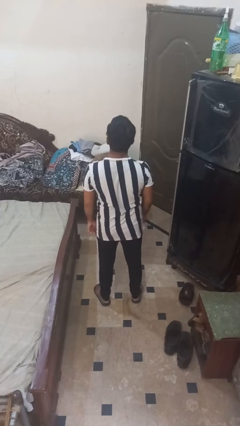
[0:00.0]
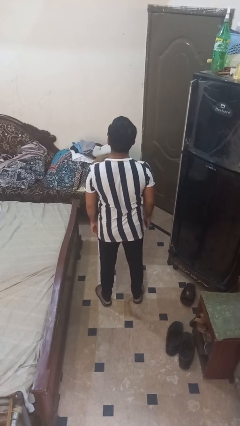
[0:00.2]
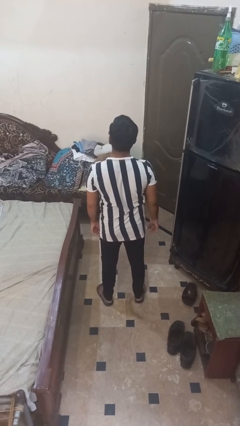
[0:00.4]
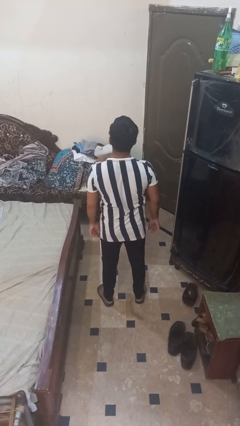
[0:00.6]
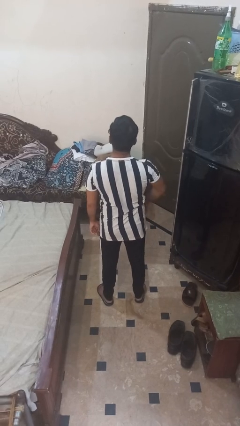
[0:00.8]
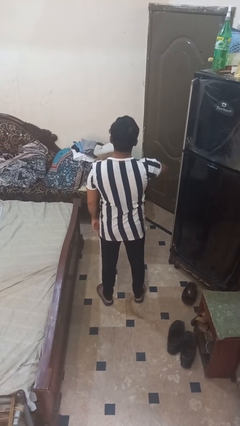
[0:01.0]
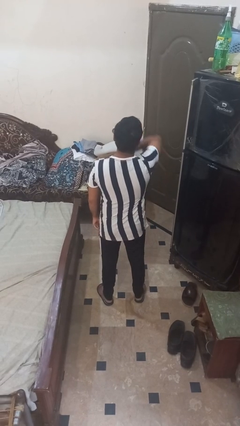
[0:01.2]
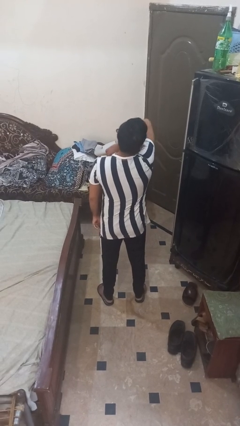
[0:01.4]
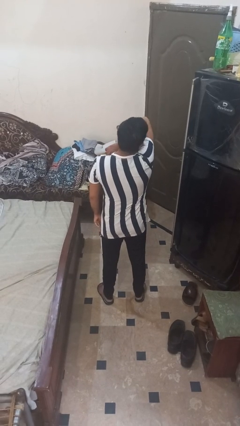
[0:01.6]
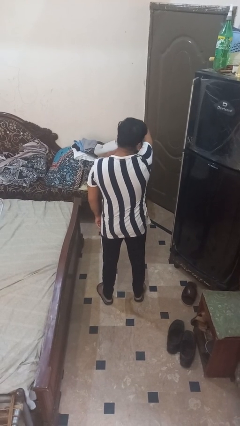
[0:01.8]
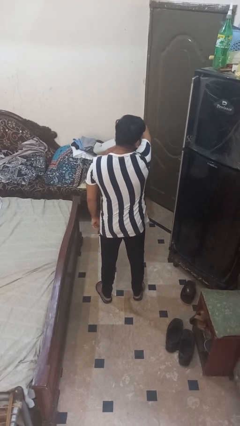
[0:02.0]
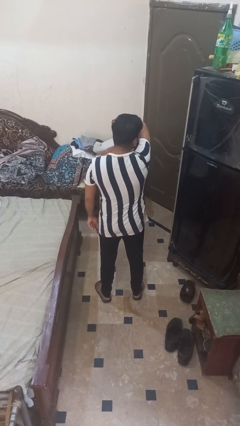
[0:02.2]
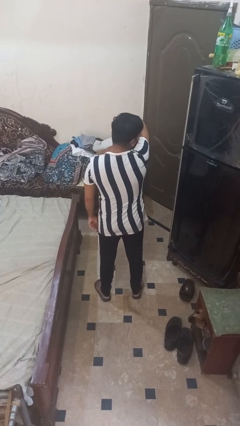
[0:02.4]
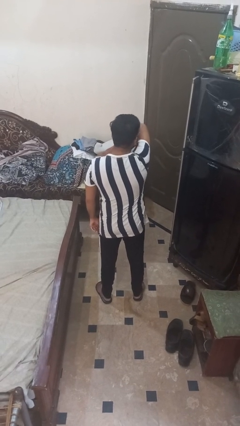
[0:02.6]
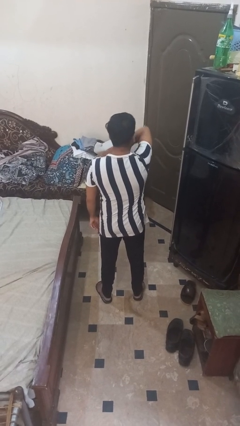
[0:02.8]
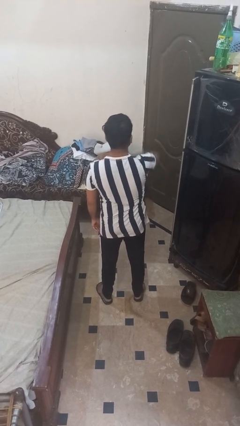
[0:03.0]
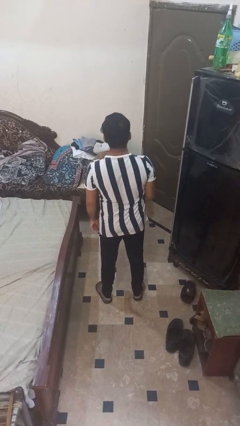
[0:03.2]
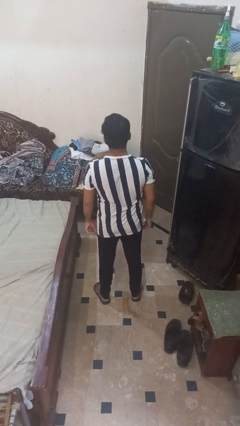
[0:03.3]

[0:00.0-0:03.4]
person sneezes into arm

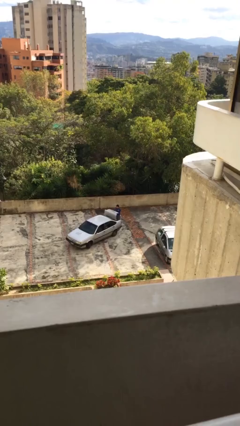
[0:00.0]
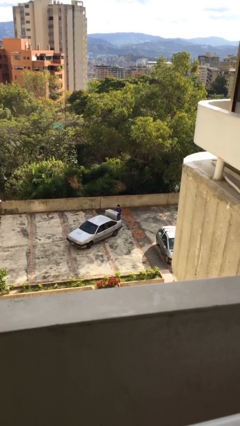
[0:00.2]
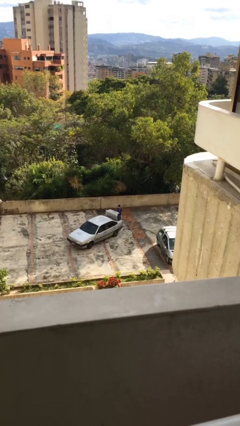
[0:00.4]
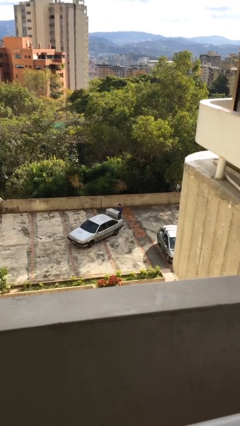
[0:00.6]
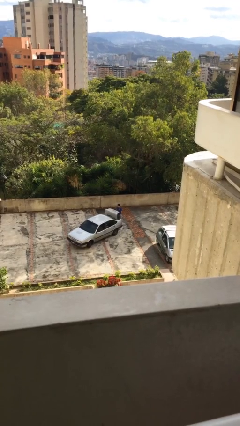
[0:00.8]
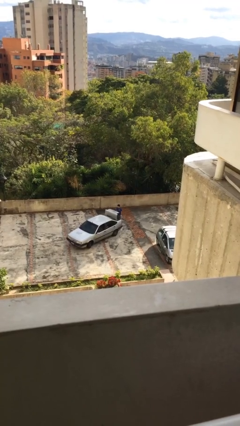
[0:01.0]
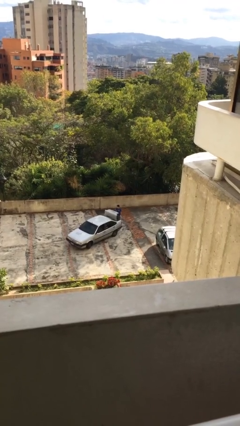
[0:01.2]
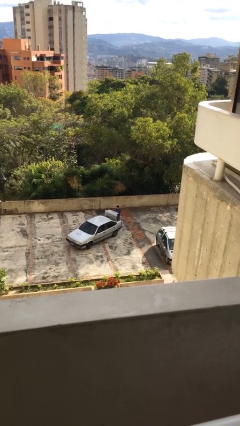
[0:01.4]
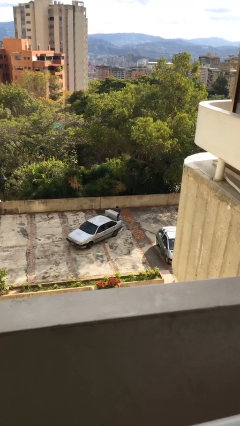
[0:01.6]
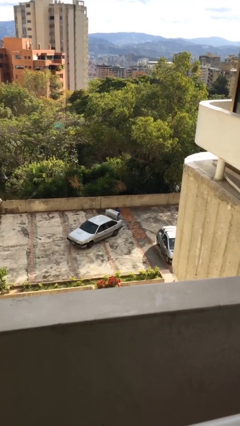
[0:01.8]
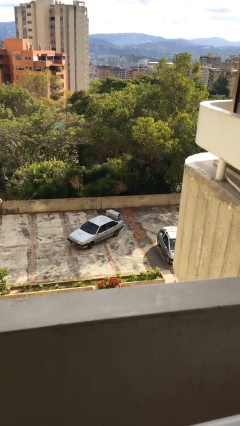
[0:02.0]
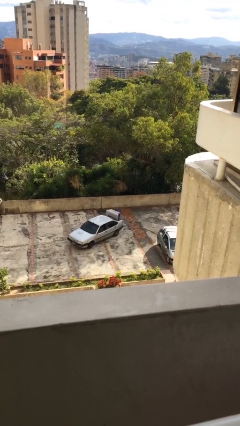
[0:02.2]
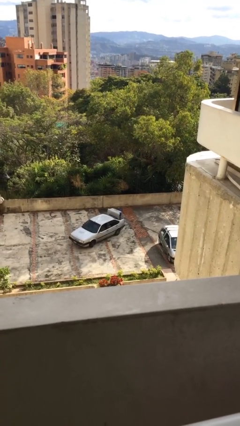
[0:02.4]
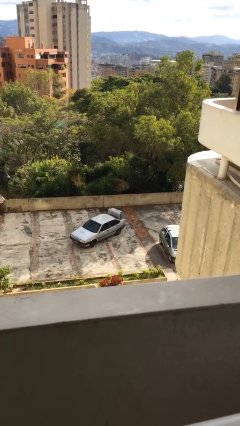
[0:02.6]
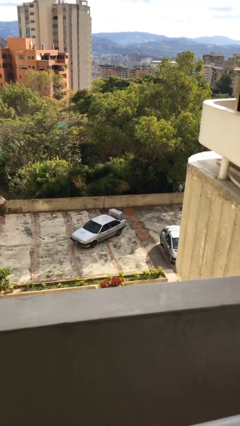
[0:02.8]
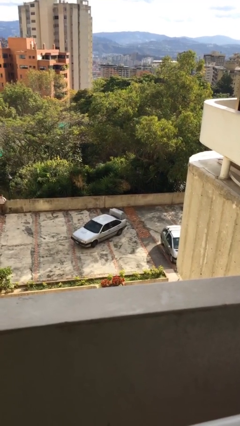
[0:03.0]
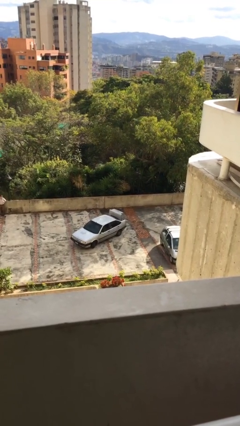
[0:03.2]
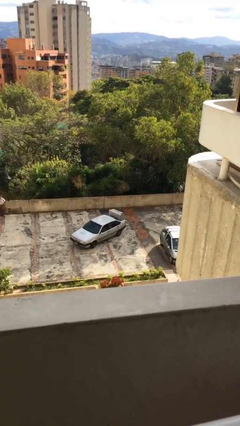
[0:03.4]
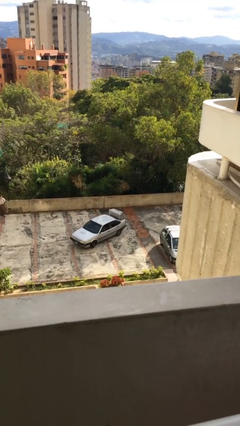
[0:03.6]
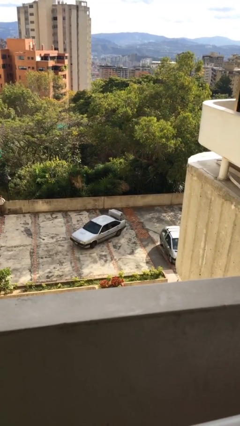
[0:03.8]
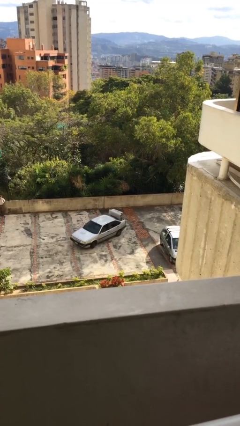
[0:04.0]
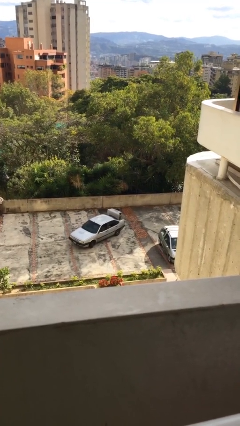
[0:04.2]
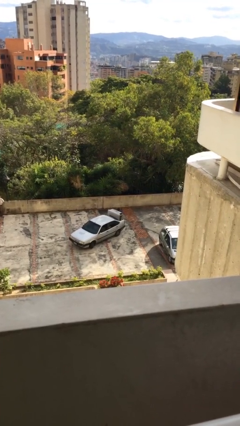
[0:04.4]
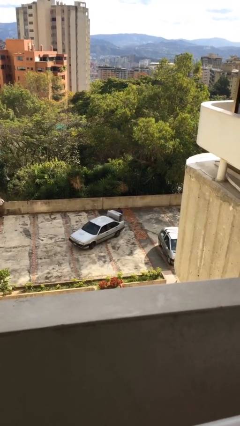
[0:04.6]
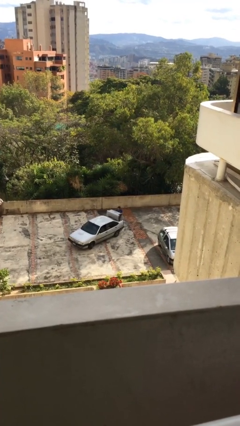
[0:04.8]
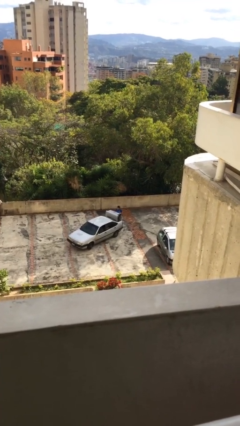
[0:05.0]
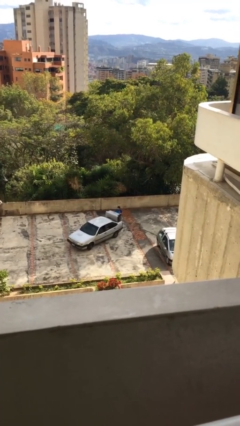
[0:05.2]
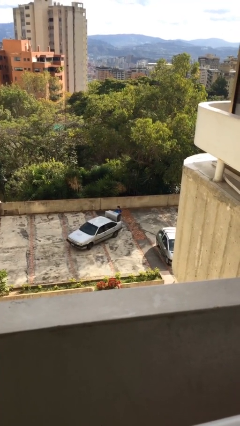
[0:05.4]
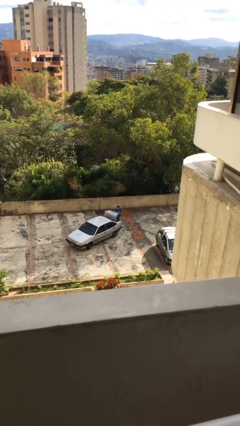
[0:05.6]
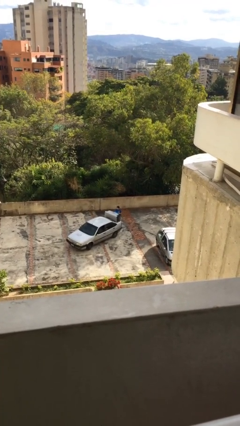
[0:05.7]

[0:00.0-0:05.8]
person unloads car

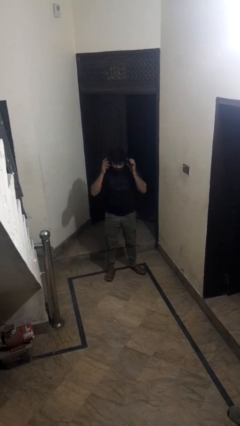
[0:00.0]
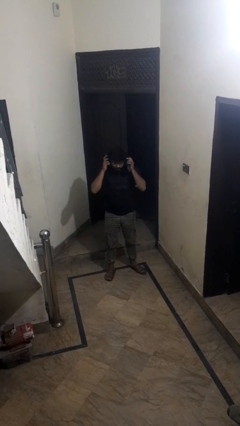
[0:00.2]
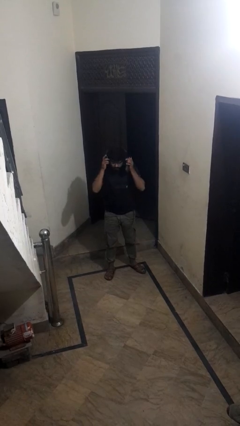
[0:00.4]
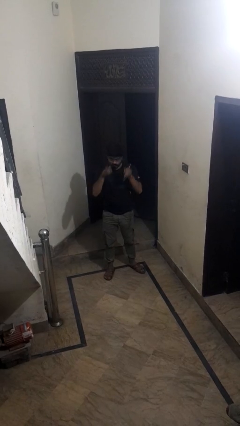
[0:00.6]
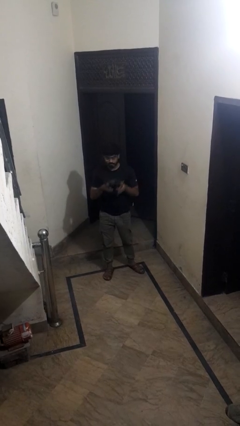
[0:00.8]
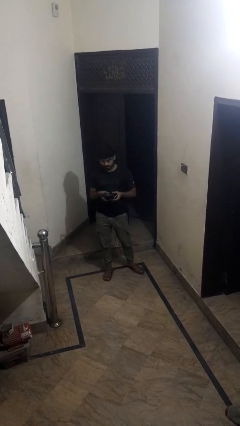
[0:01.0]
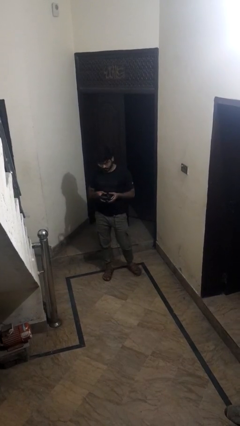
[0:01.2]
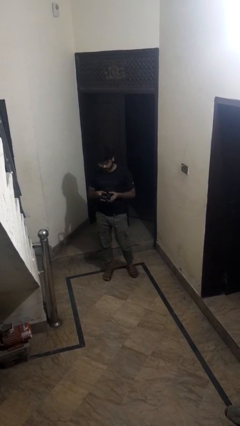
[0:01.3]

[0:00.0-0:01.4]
person takes off headphones

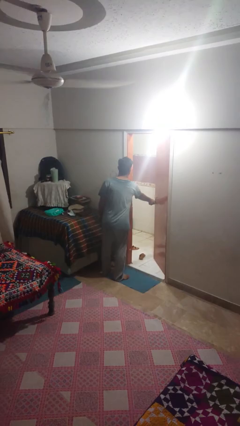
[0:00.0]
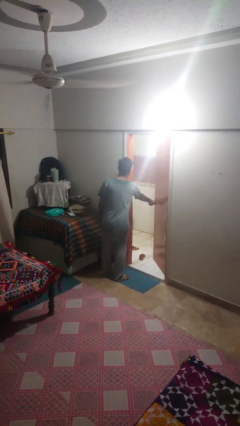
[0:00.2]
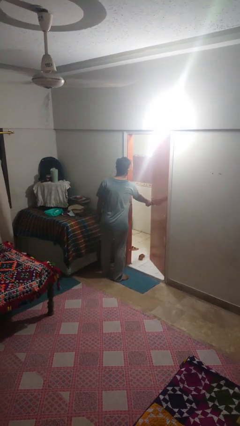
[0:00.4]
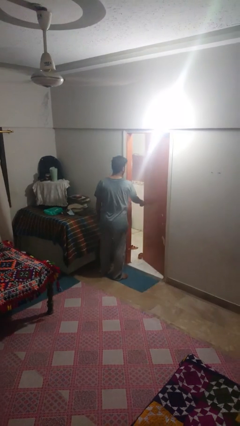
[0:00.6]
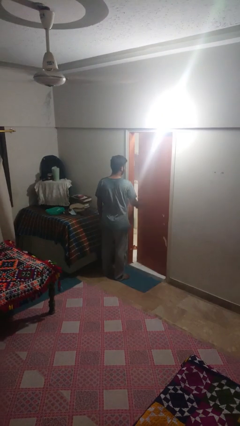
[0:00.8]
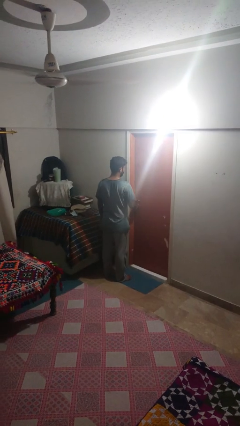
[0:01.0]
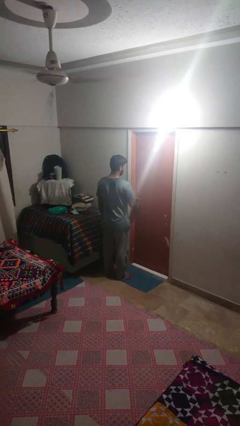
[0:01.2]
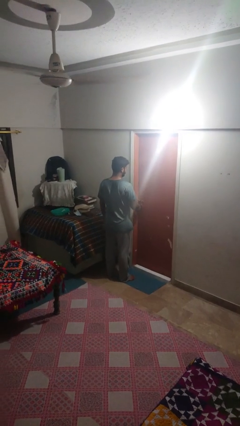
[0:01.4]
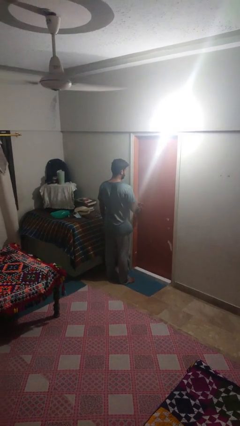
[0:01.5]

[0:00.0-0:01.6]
person closes facility door

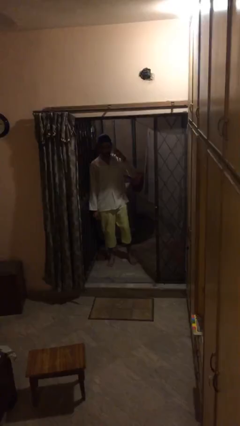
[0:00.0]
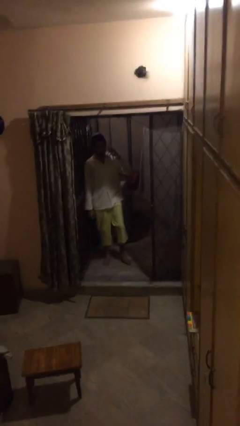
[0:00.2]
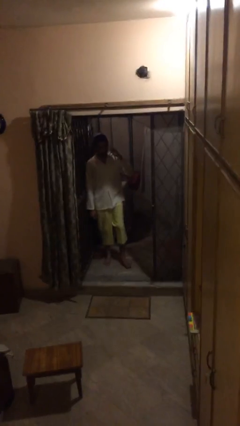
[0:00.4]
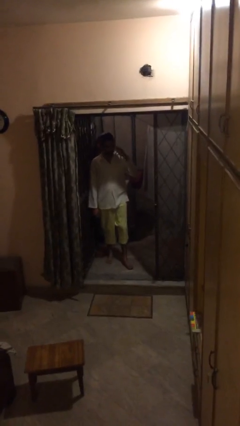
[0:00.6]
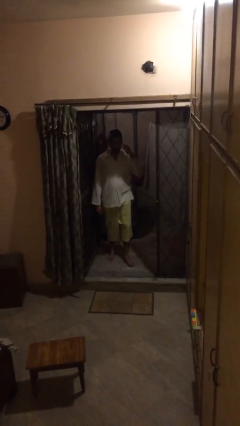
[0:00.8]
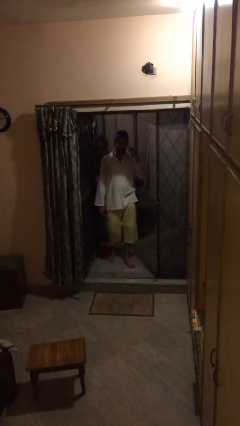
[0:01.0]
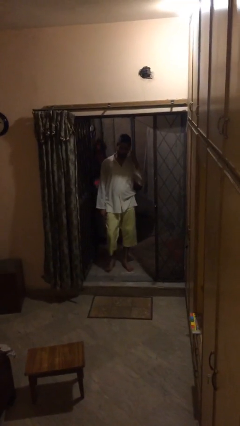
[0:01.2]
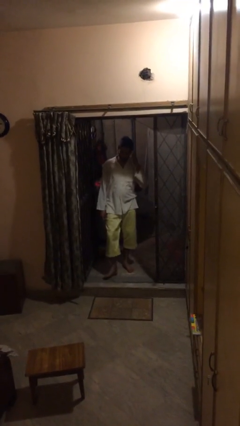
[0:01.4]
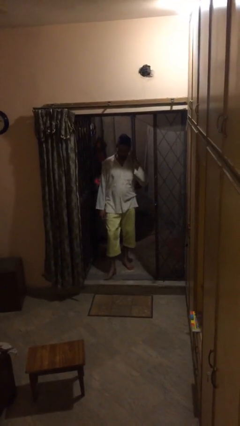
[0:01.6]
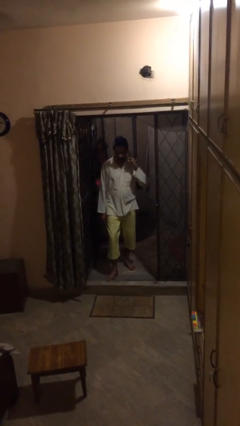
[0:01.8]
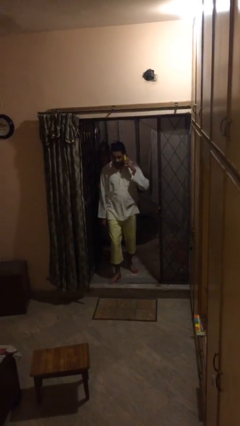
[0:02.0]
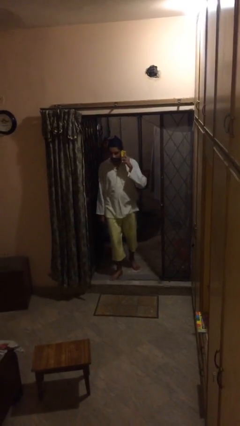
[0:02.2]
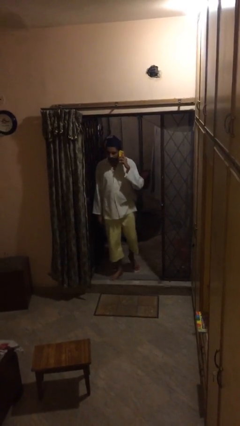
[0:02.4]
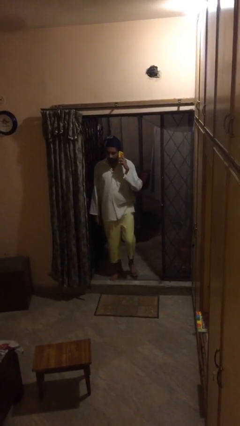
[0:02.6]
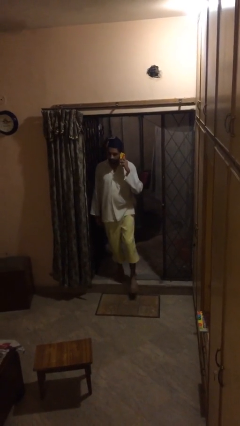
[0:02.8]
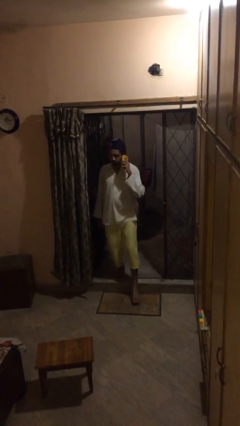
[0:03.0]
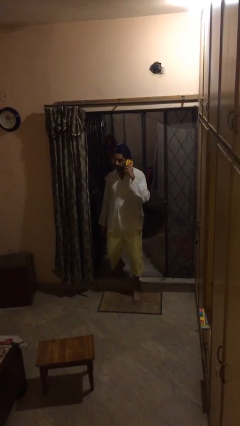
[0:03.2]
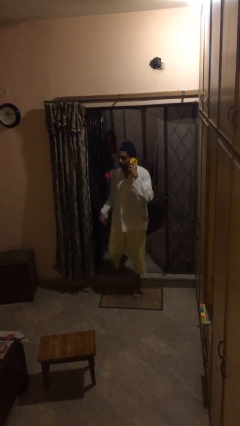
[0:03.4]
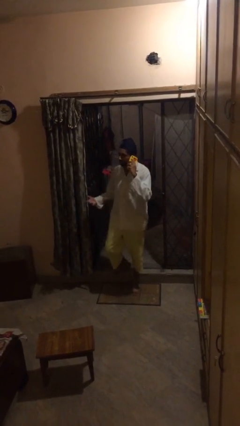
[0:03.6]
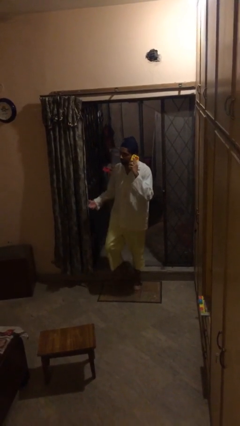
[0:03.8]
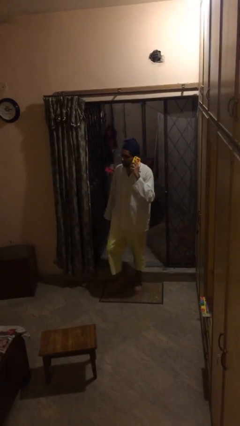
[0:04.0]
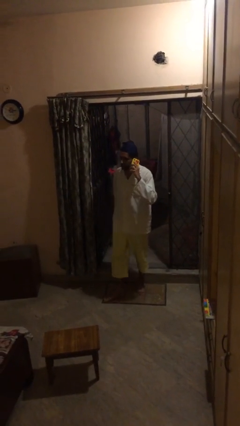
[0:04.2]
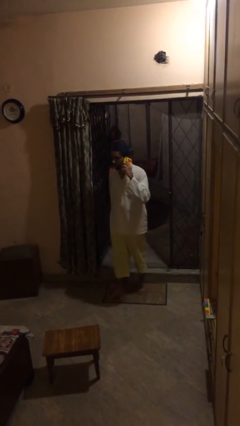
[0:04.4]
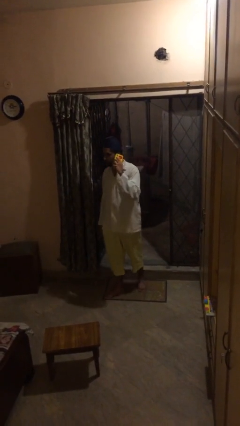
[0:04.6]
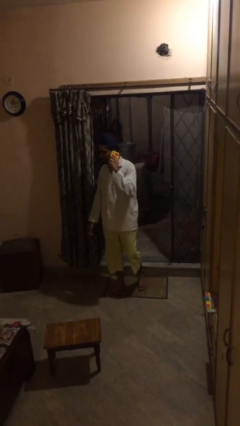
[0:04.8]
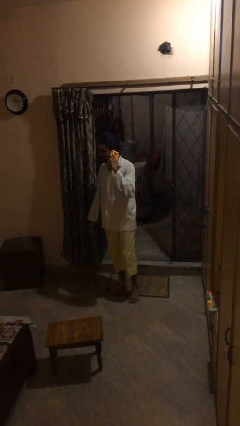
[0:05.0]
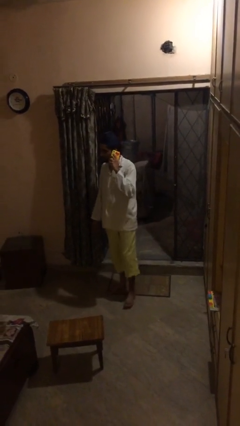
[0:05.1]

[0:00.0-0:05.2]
person enters scene through structure
